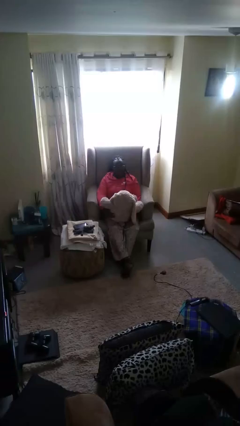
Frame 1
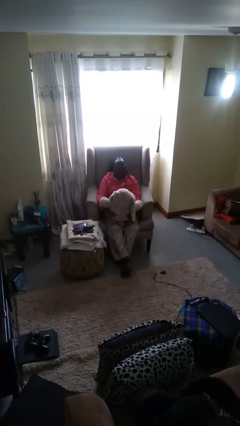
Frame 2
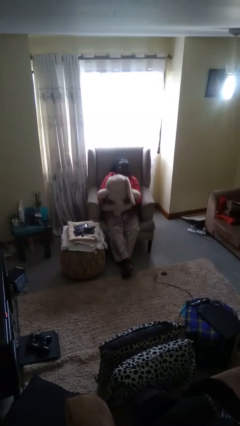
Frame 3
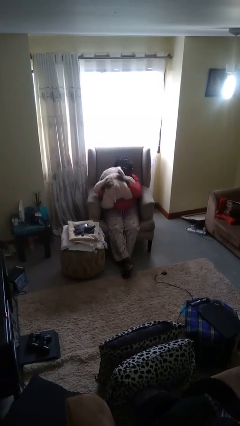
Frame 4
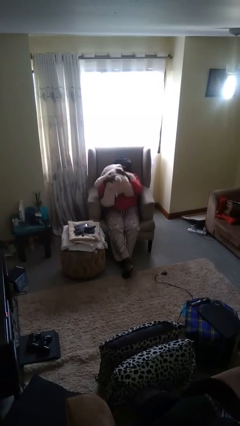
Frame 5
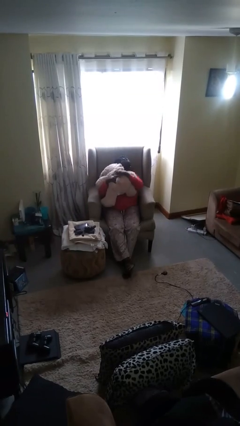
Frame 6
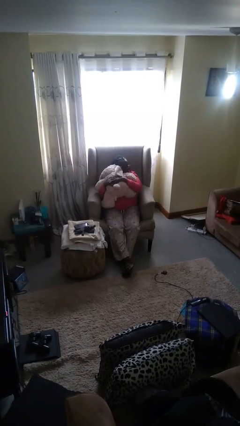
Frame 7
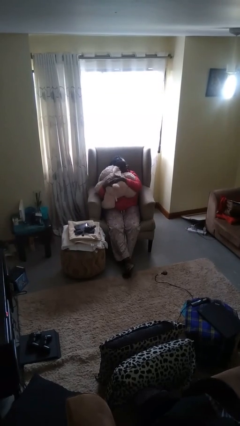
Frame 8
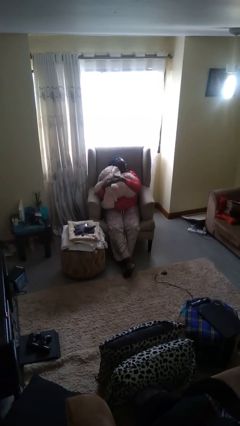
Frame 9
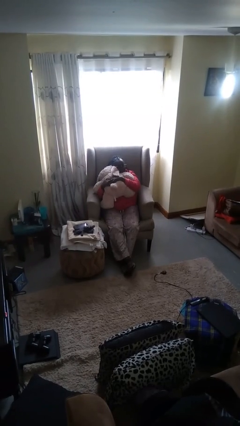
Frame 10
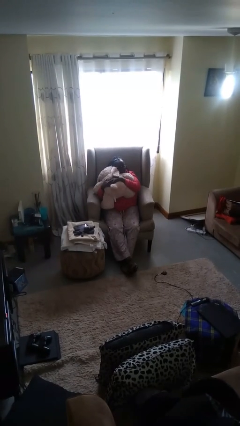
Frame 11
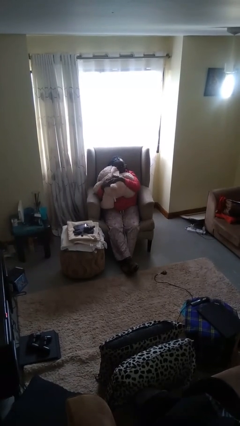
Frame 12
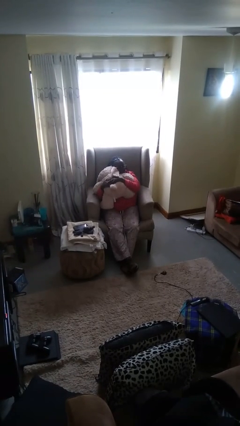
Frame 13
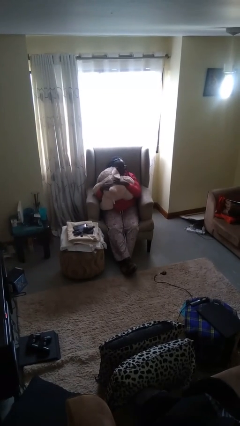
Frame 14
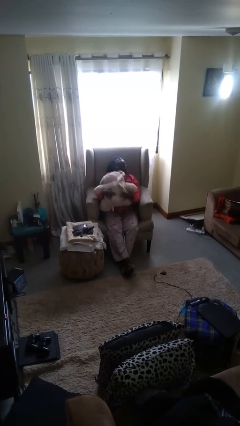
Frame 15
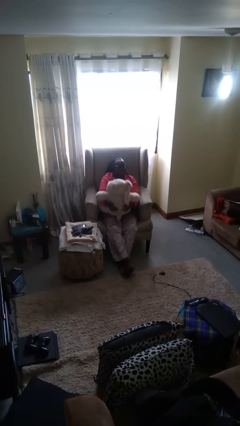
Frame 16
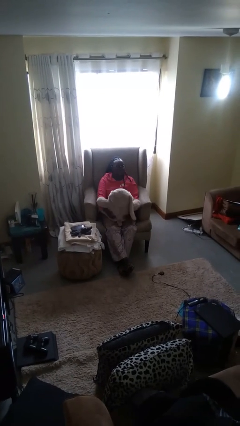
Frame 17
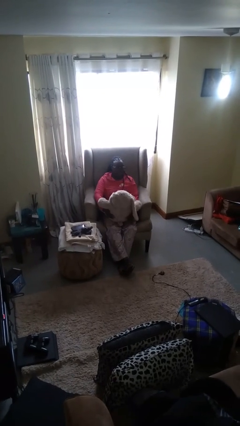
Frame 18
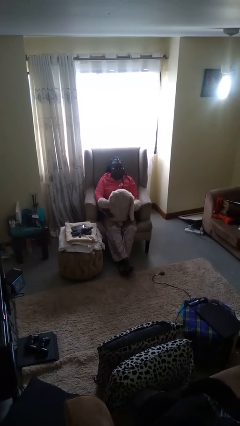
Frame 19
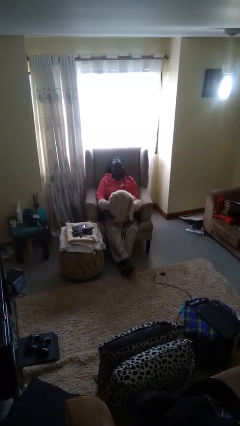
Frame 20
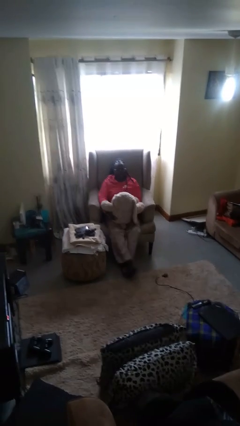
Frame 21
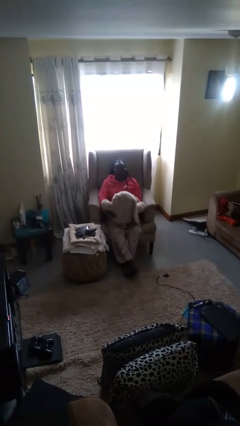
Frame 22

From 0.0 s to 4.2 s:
person hugs stuffed animal

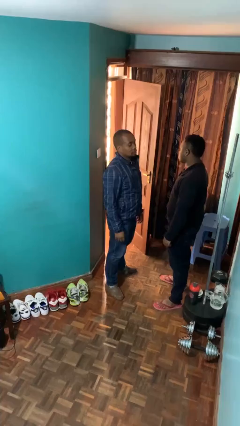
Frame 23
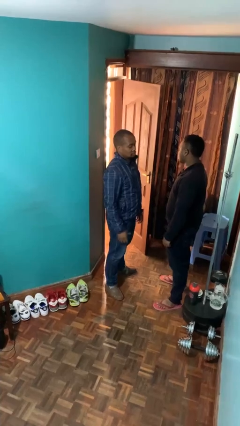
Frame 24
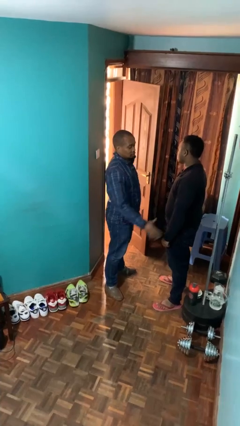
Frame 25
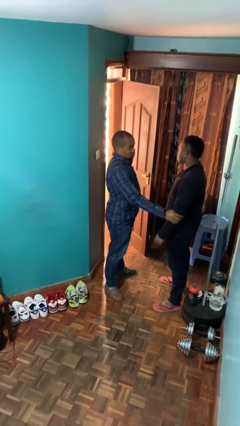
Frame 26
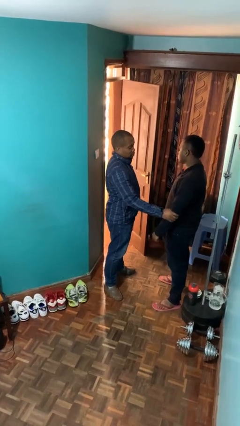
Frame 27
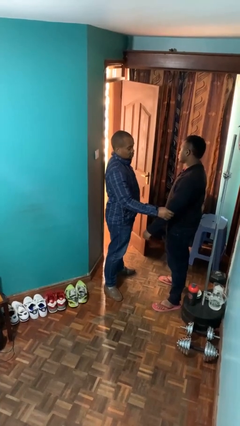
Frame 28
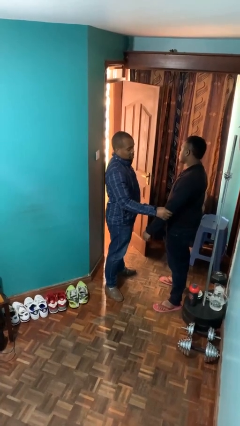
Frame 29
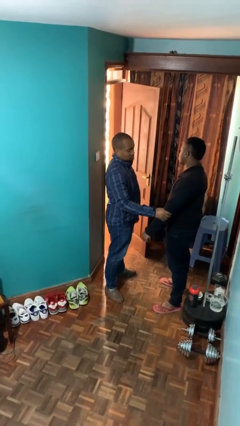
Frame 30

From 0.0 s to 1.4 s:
person grabs person by forearm

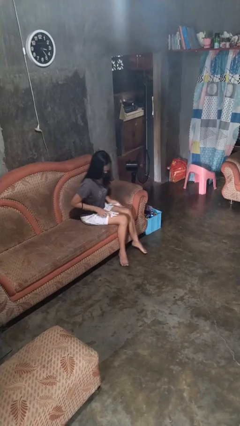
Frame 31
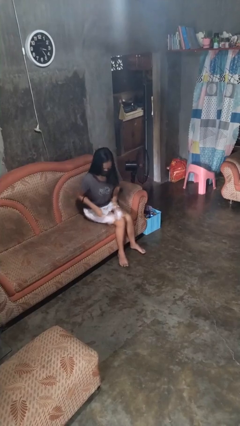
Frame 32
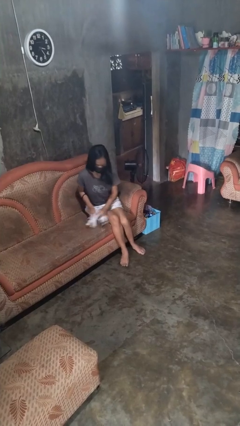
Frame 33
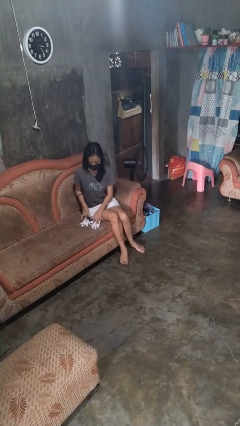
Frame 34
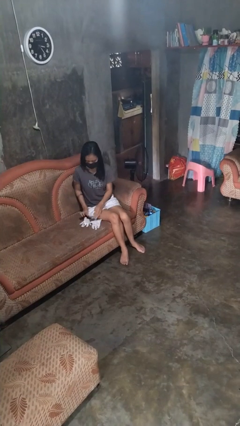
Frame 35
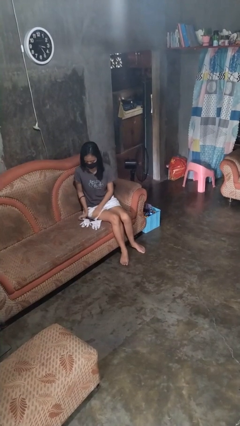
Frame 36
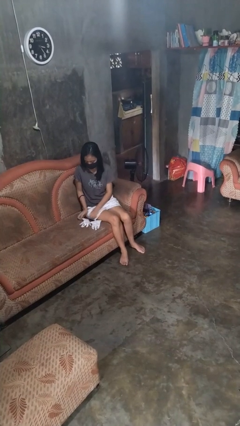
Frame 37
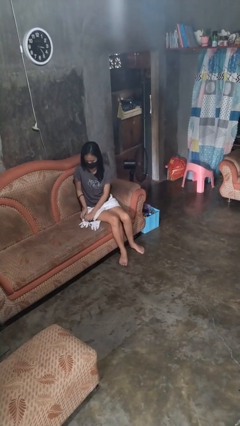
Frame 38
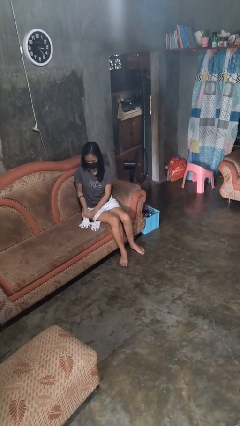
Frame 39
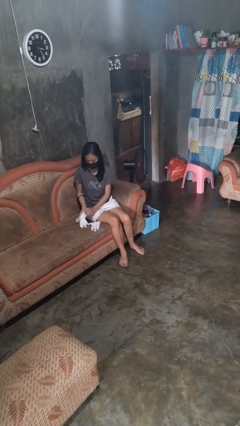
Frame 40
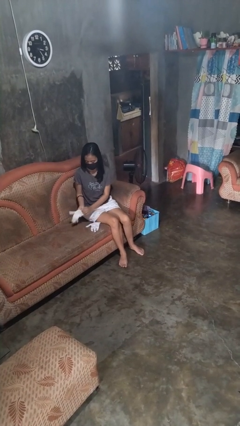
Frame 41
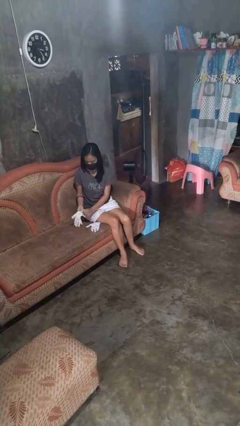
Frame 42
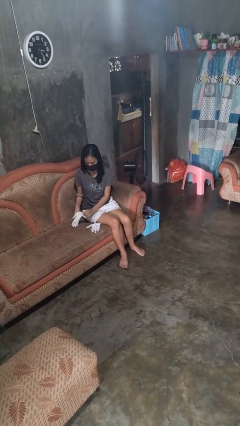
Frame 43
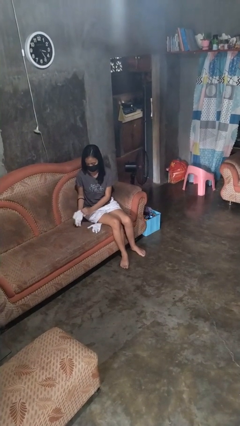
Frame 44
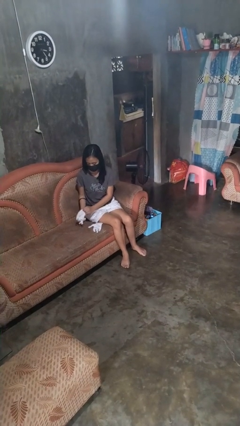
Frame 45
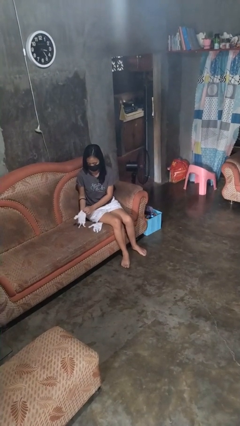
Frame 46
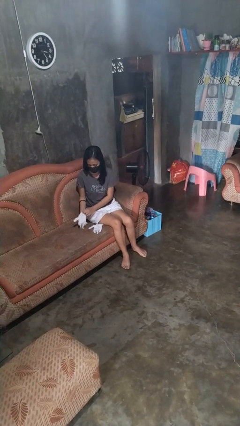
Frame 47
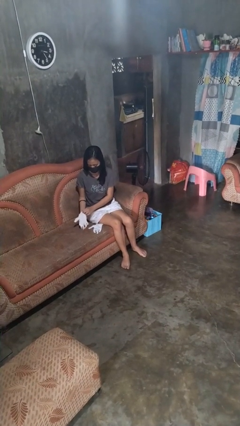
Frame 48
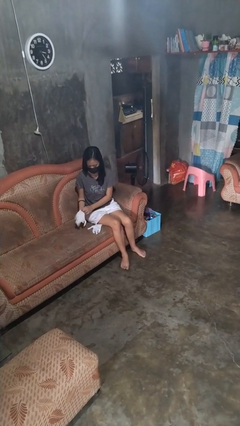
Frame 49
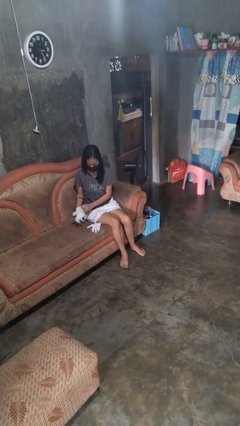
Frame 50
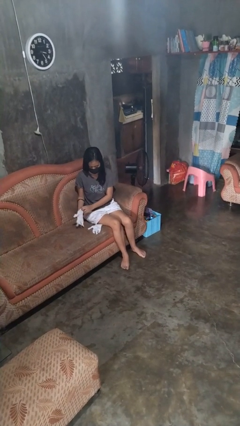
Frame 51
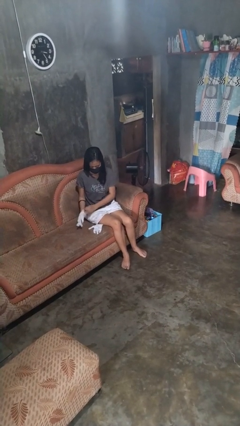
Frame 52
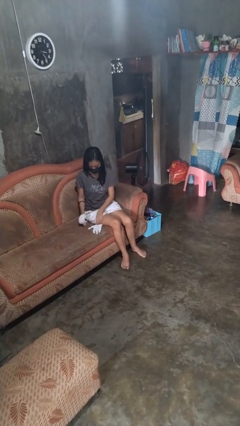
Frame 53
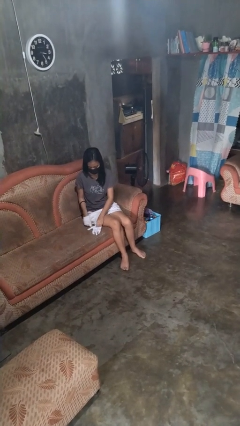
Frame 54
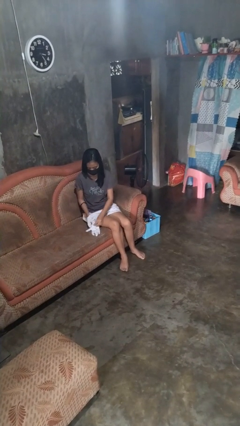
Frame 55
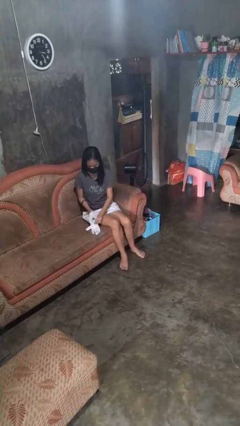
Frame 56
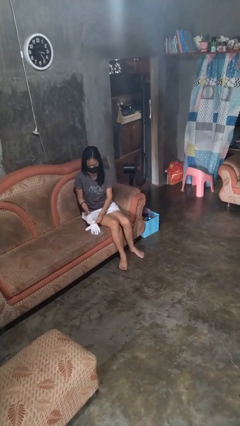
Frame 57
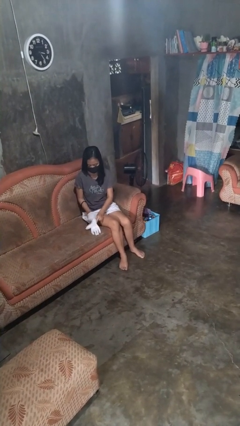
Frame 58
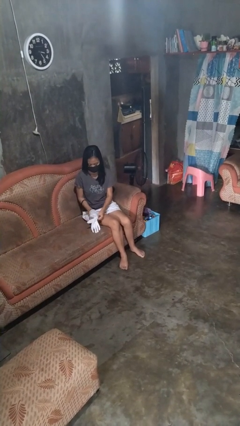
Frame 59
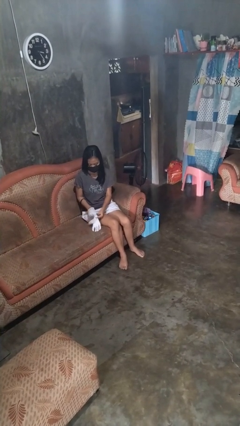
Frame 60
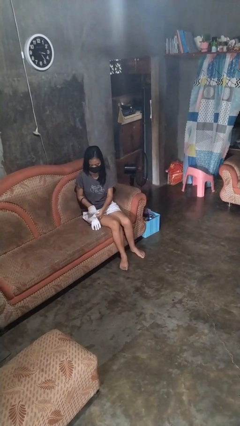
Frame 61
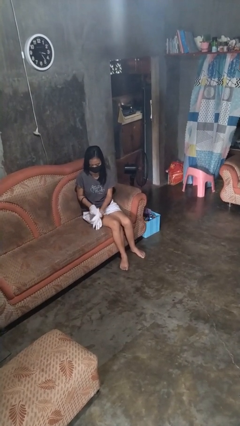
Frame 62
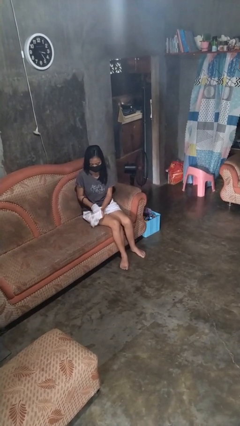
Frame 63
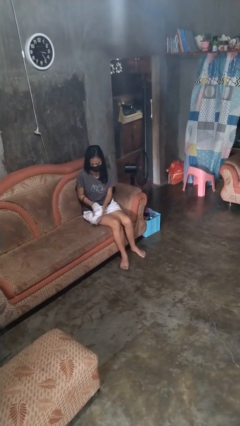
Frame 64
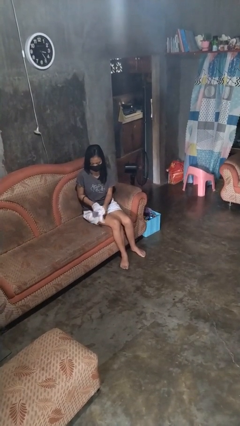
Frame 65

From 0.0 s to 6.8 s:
person puts on gloves

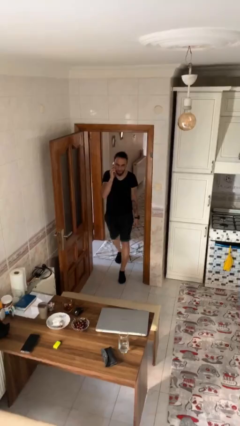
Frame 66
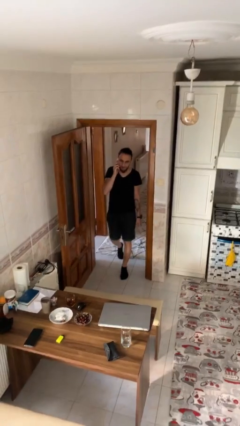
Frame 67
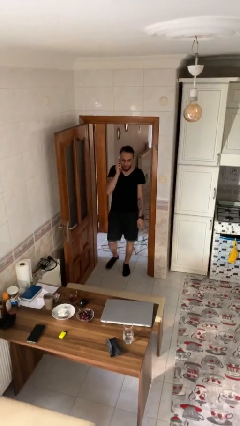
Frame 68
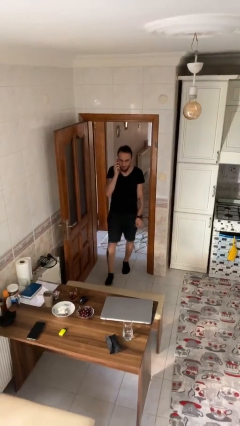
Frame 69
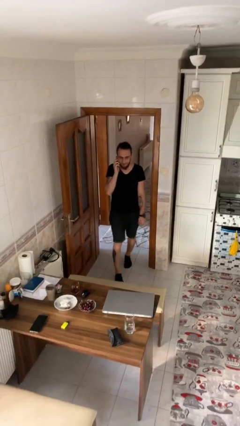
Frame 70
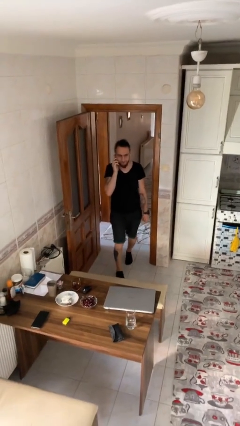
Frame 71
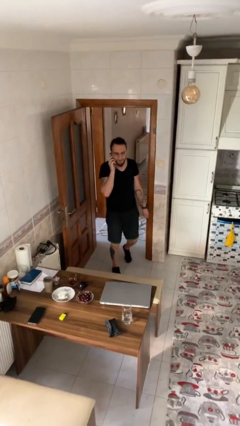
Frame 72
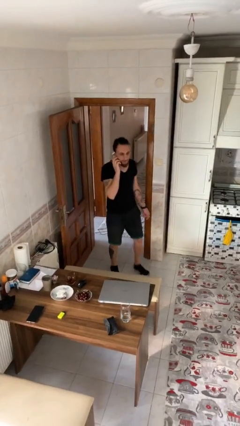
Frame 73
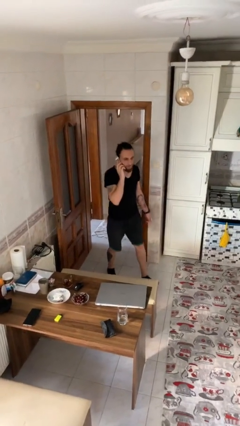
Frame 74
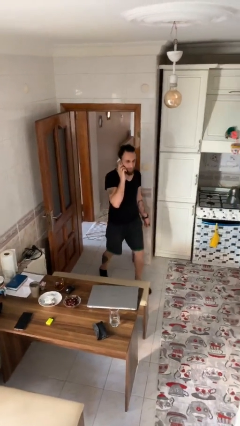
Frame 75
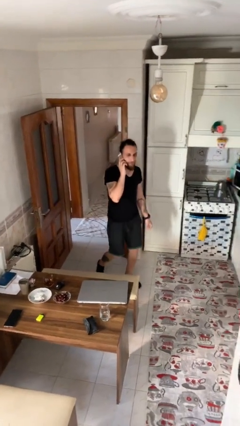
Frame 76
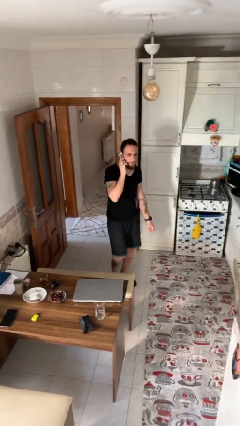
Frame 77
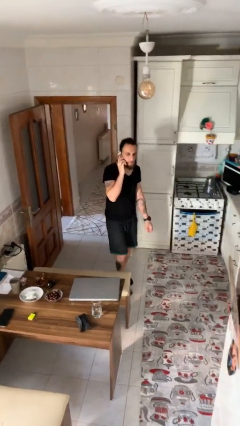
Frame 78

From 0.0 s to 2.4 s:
person enters scene through structure

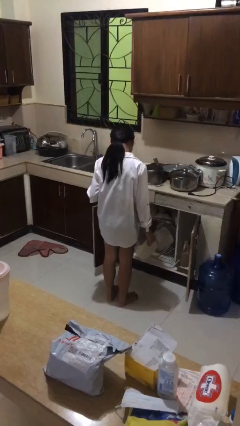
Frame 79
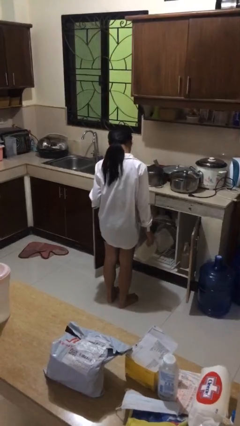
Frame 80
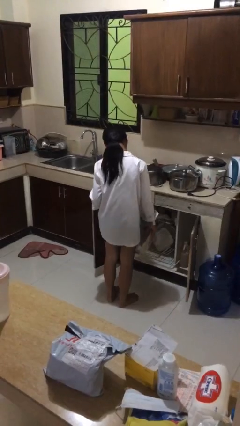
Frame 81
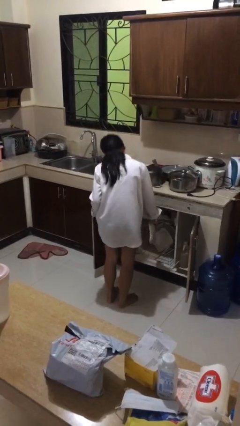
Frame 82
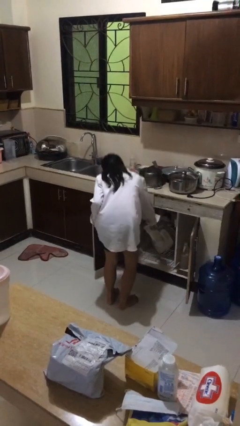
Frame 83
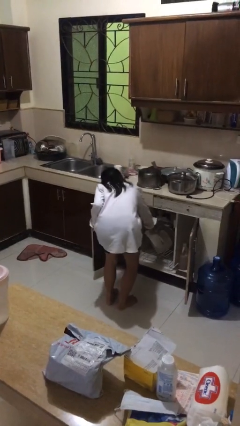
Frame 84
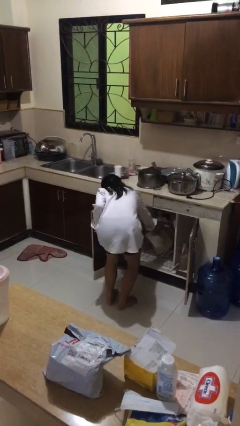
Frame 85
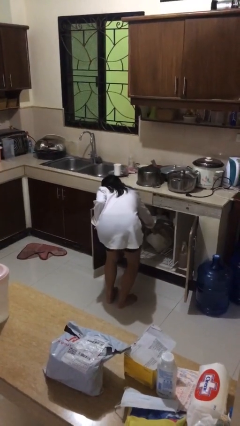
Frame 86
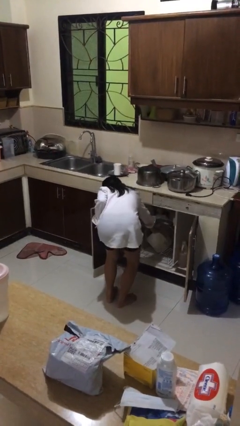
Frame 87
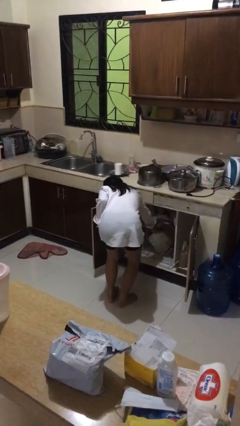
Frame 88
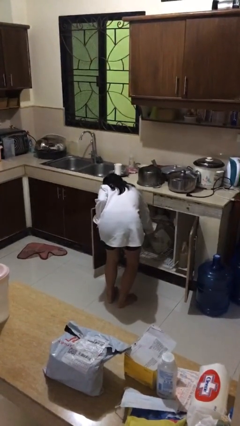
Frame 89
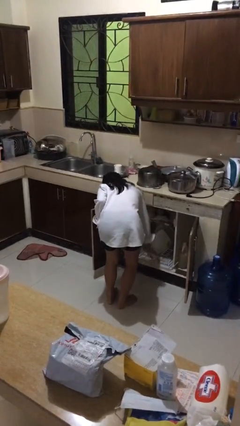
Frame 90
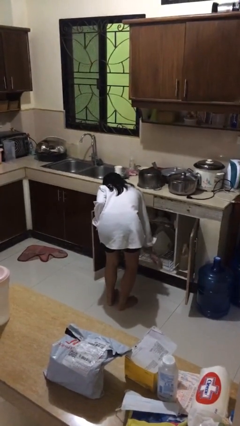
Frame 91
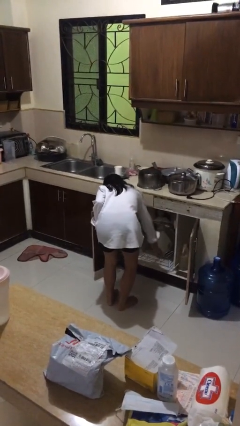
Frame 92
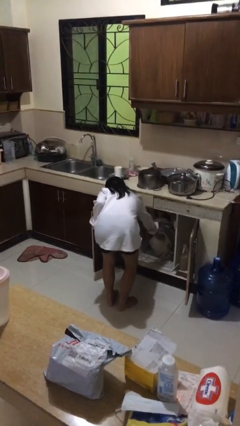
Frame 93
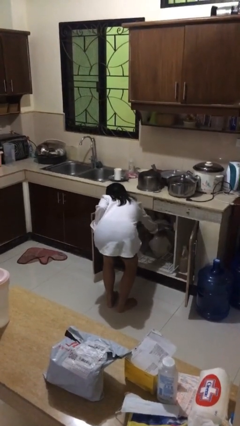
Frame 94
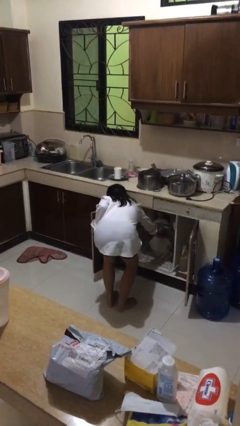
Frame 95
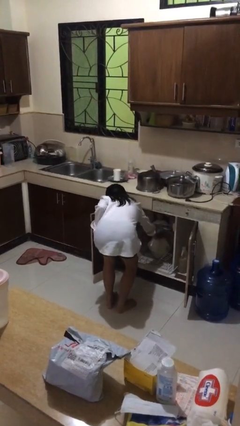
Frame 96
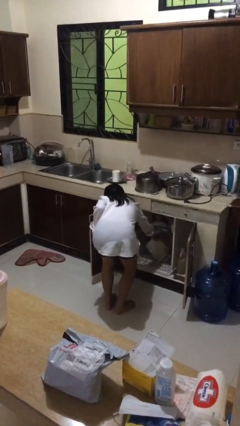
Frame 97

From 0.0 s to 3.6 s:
person loads dishwasher
